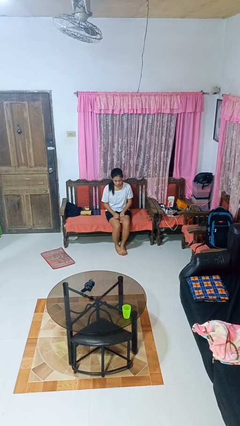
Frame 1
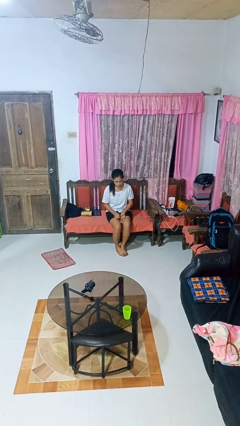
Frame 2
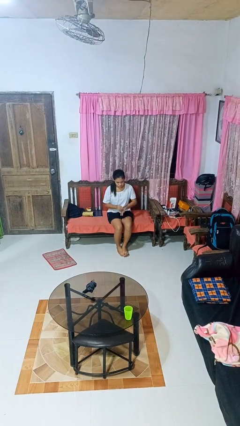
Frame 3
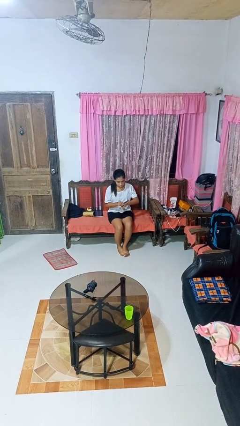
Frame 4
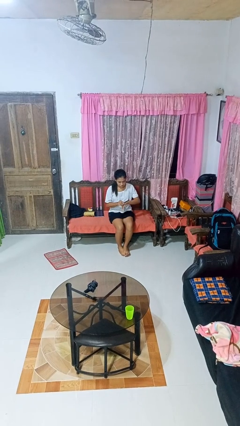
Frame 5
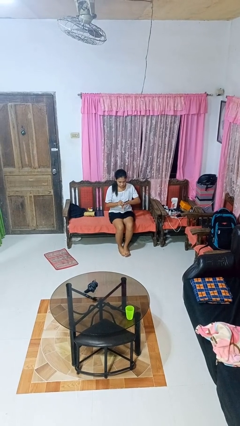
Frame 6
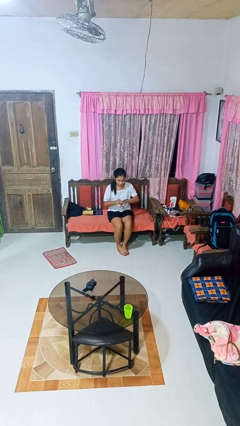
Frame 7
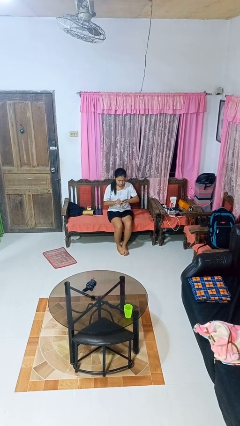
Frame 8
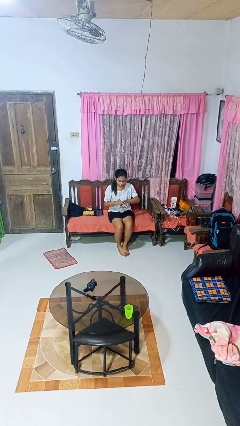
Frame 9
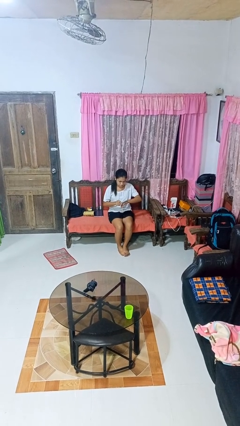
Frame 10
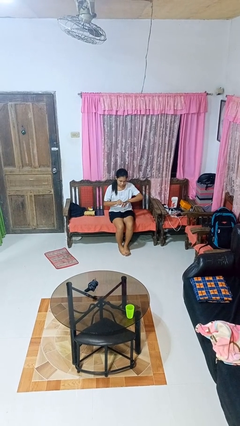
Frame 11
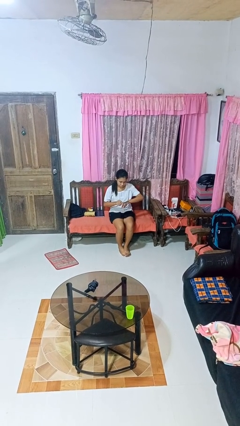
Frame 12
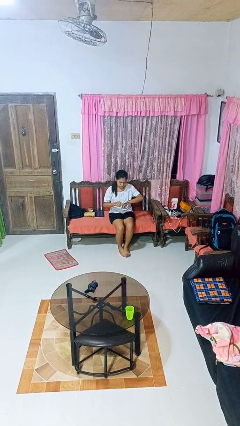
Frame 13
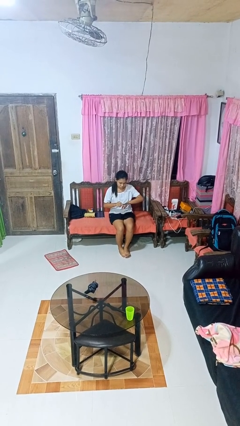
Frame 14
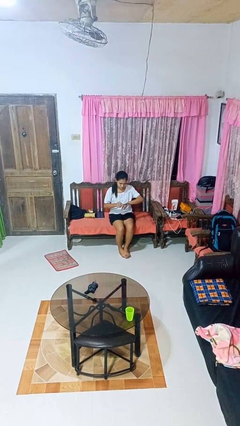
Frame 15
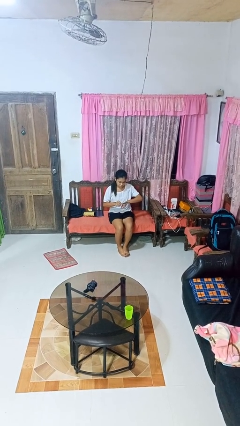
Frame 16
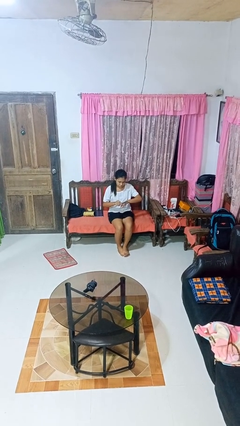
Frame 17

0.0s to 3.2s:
person files fingernails

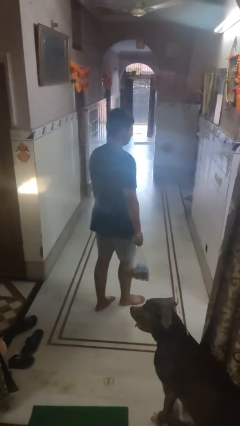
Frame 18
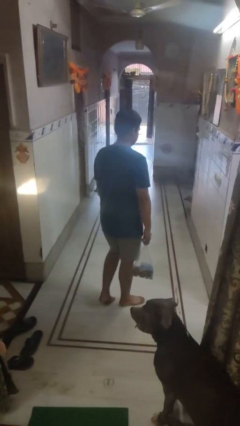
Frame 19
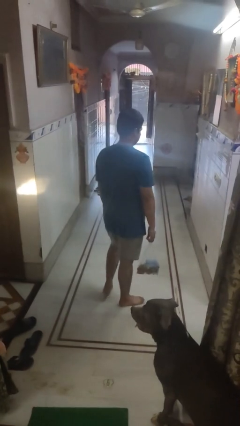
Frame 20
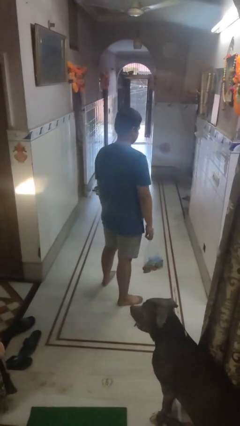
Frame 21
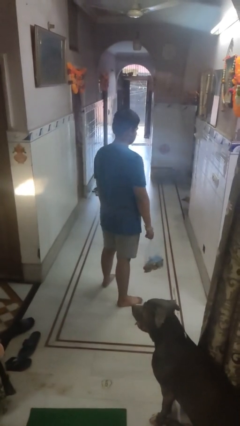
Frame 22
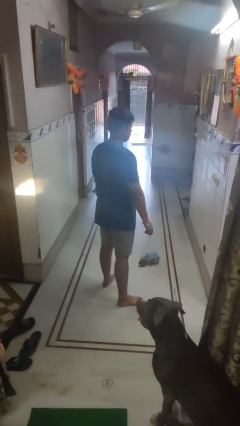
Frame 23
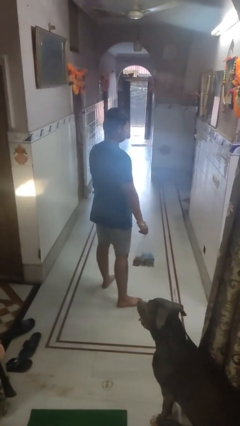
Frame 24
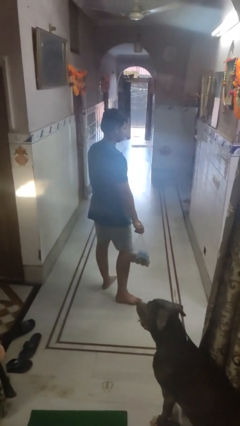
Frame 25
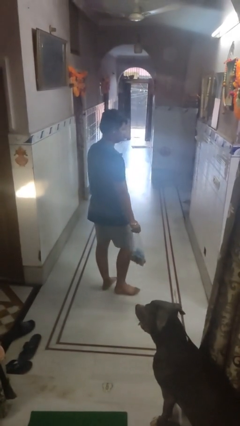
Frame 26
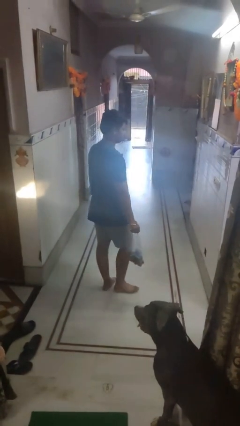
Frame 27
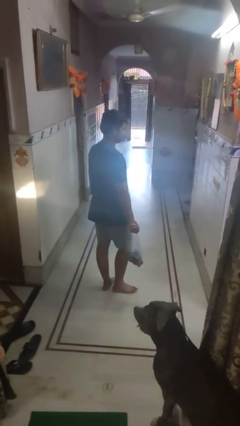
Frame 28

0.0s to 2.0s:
person carries groceries

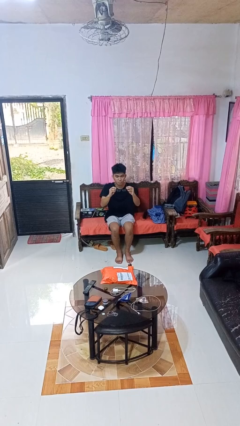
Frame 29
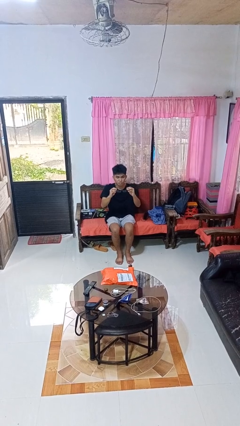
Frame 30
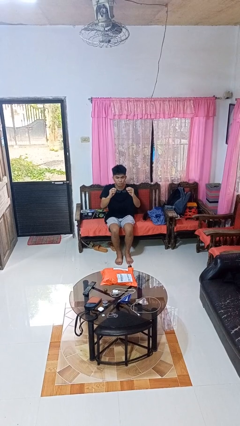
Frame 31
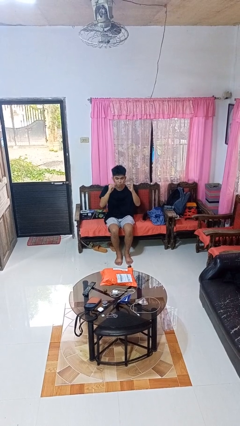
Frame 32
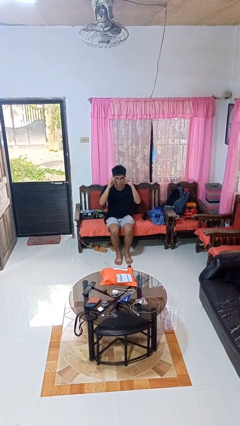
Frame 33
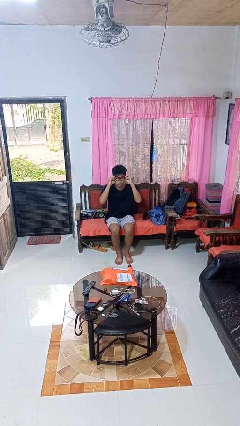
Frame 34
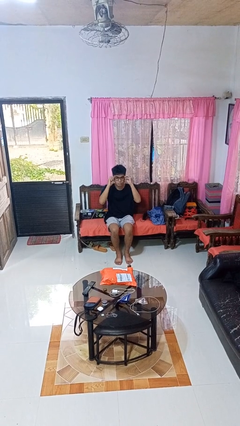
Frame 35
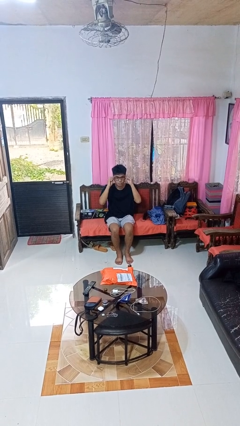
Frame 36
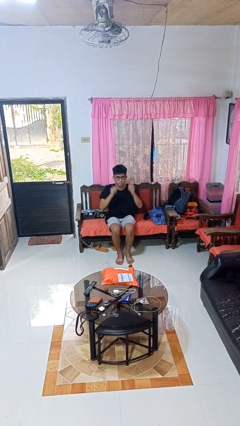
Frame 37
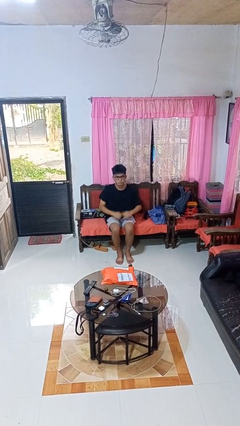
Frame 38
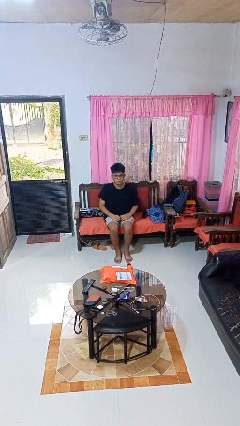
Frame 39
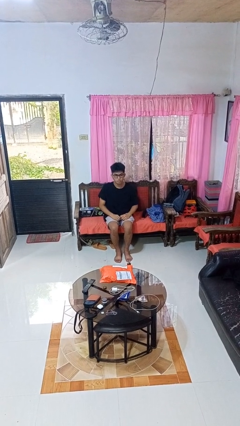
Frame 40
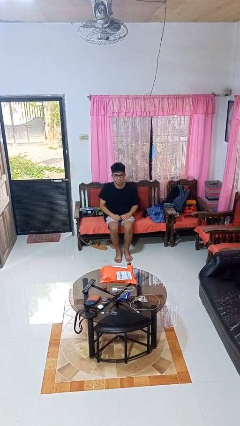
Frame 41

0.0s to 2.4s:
person puts on glasses

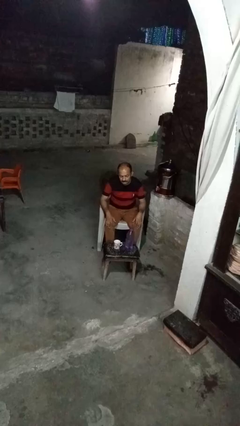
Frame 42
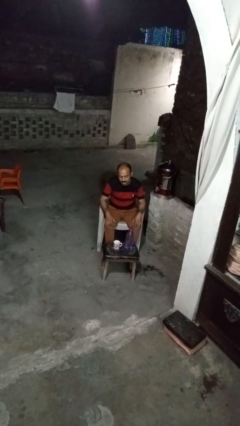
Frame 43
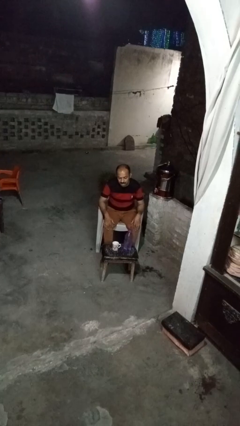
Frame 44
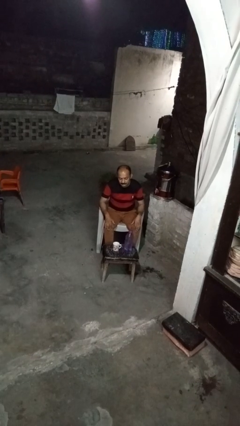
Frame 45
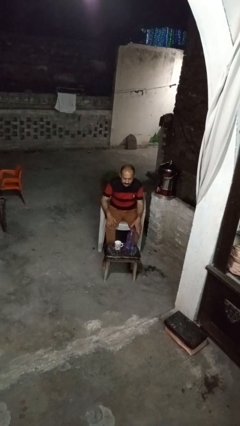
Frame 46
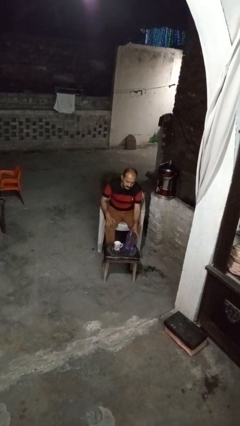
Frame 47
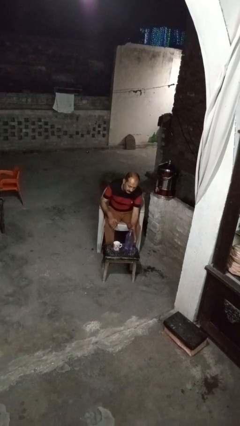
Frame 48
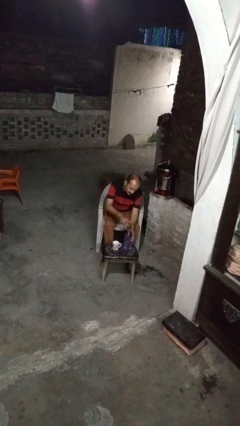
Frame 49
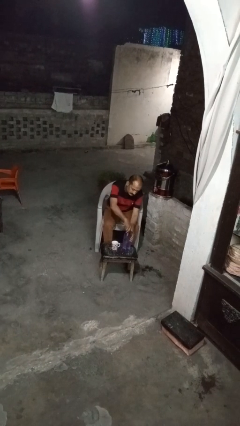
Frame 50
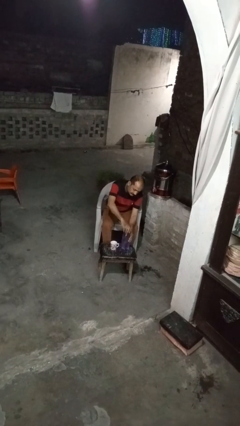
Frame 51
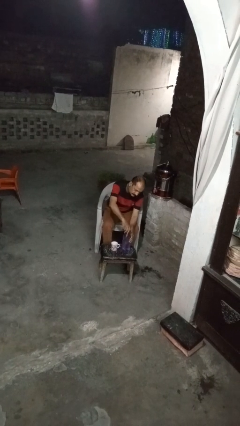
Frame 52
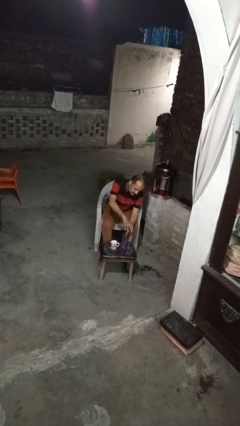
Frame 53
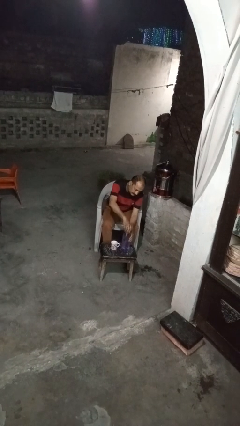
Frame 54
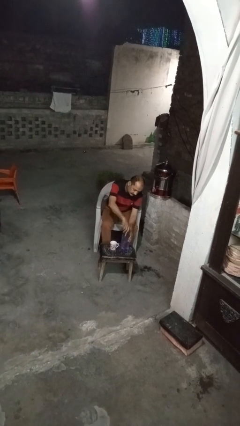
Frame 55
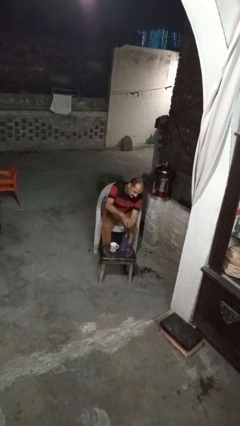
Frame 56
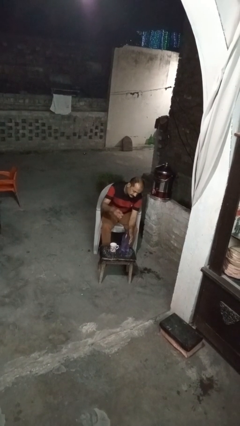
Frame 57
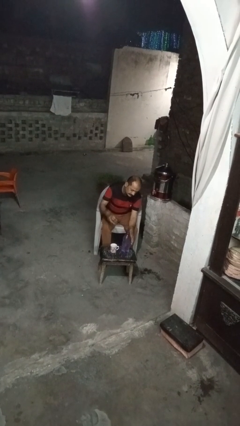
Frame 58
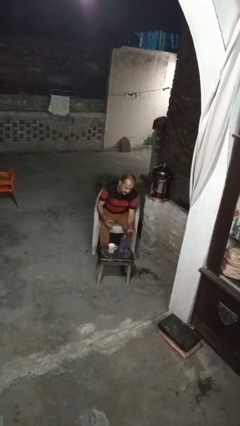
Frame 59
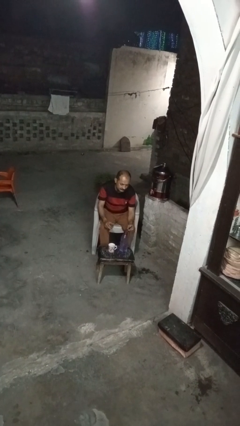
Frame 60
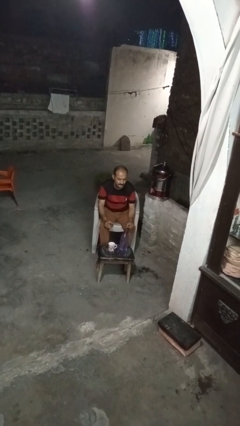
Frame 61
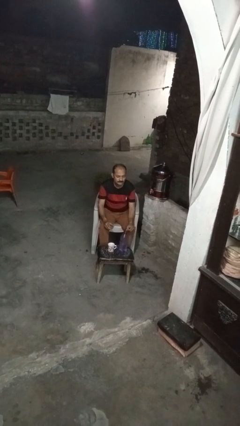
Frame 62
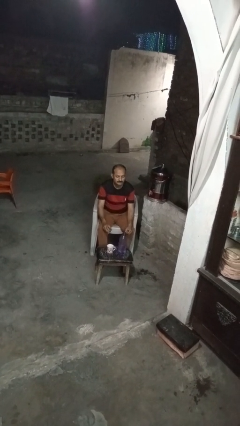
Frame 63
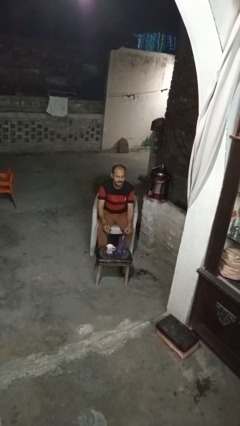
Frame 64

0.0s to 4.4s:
person unscrews lid from bottle

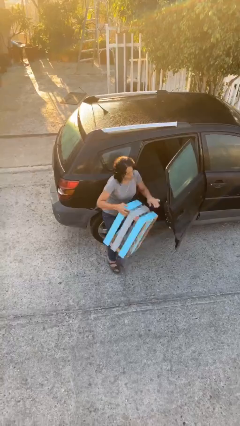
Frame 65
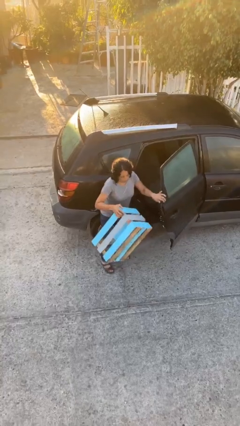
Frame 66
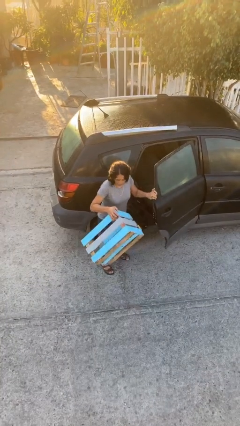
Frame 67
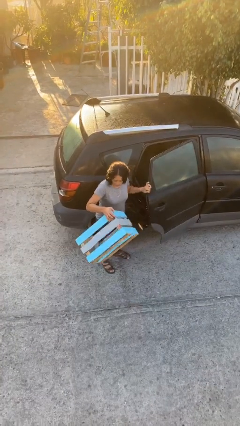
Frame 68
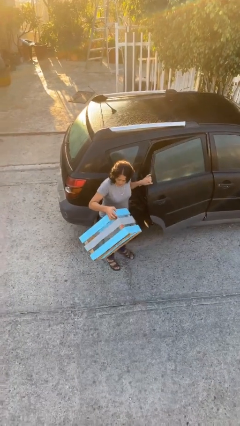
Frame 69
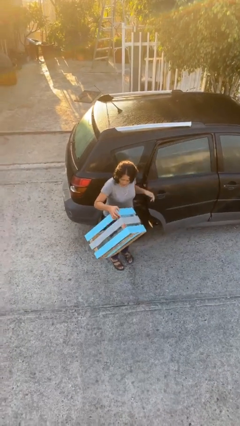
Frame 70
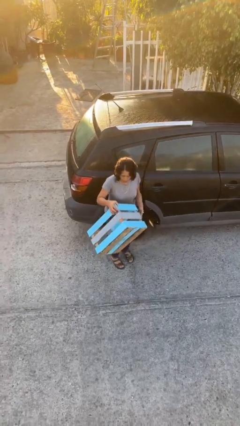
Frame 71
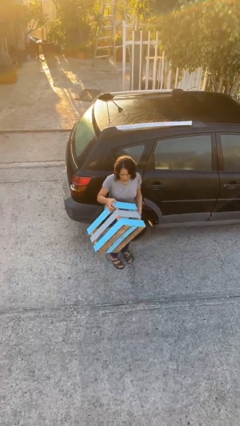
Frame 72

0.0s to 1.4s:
person closes car door

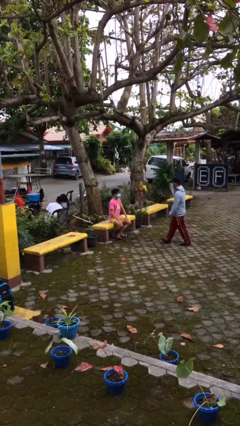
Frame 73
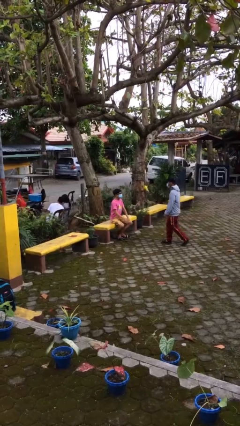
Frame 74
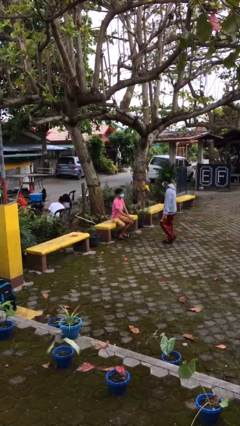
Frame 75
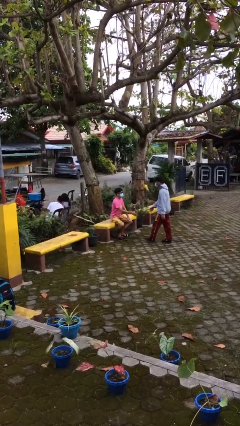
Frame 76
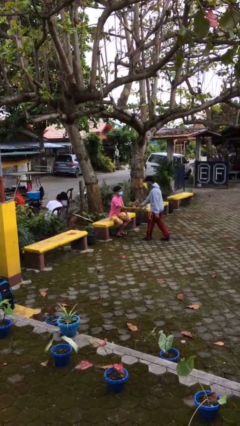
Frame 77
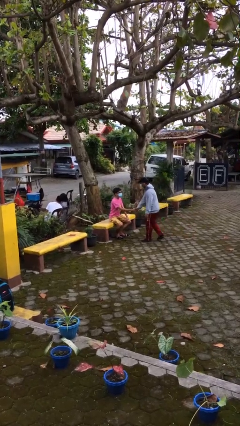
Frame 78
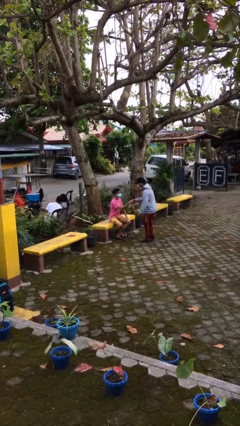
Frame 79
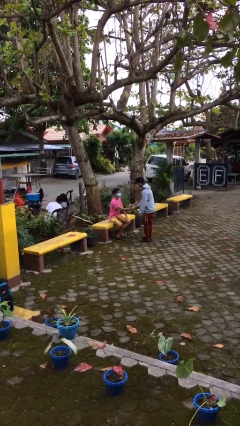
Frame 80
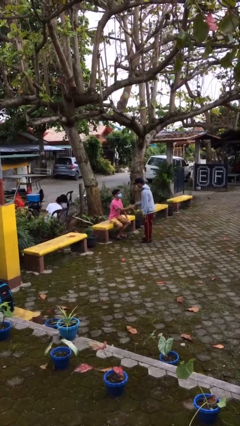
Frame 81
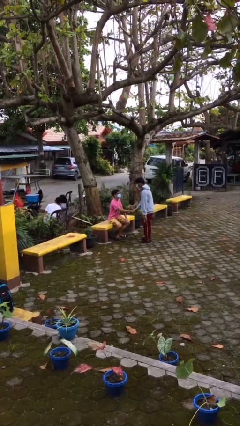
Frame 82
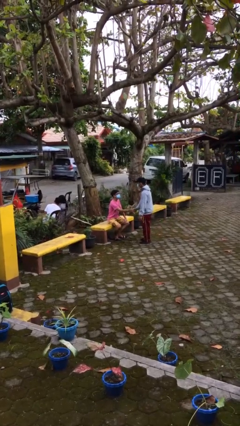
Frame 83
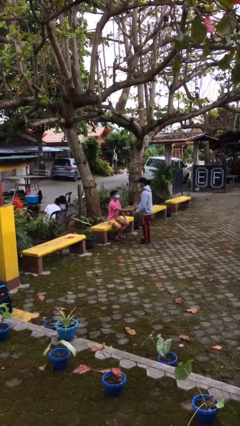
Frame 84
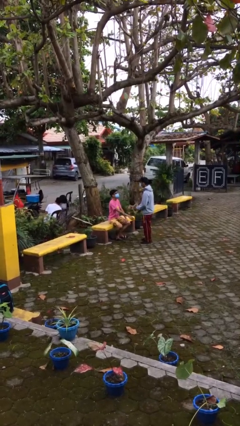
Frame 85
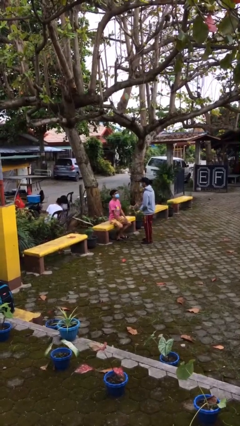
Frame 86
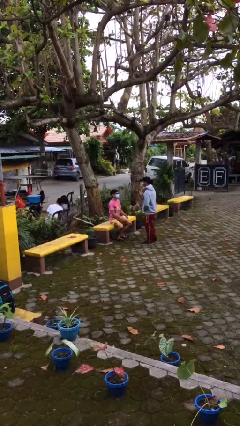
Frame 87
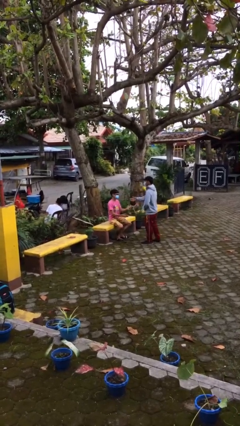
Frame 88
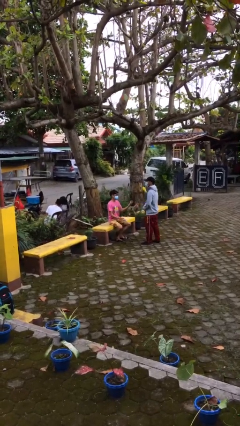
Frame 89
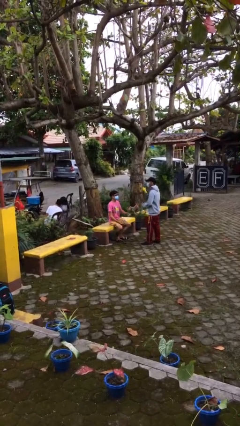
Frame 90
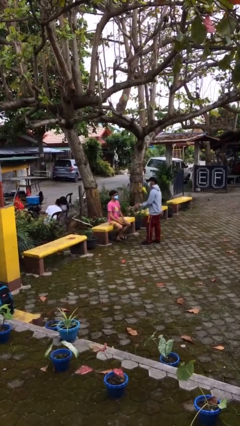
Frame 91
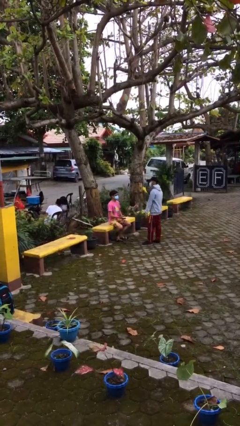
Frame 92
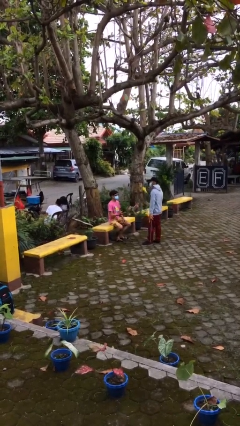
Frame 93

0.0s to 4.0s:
person shakes hand

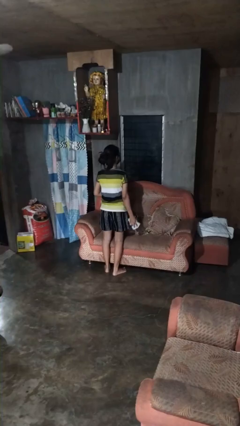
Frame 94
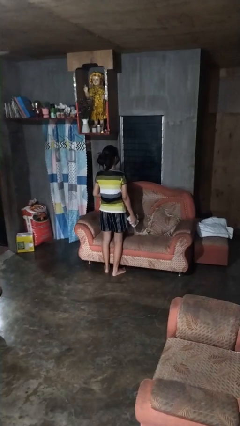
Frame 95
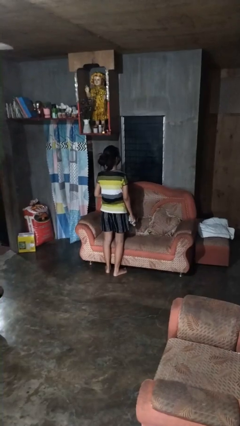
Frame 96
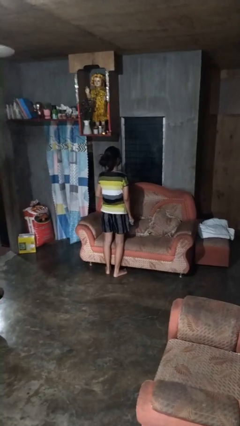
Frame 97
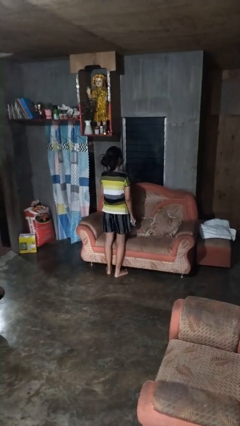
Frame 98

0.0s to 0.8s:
person sprays from bottle
